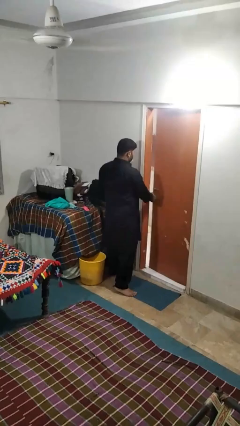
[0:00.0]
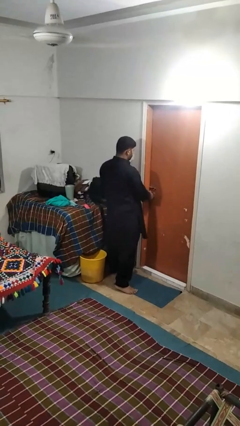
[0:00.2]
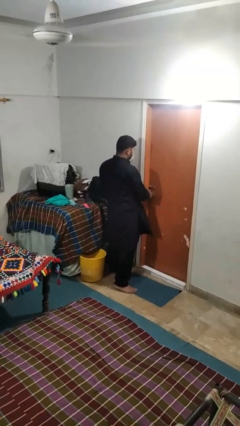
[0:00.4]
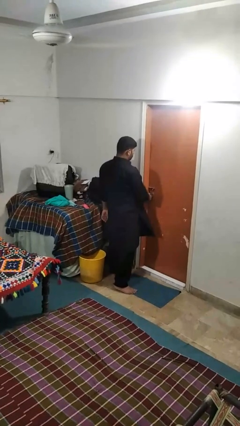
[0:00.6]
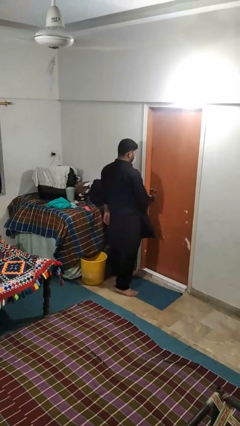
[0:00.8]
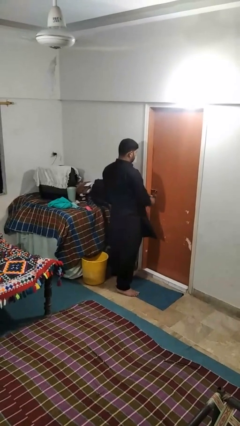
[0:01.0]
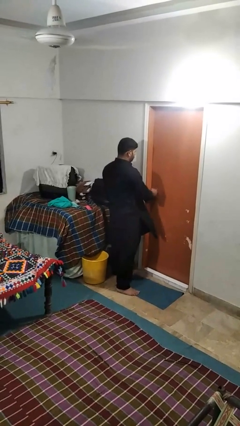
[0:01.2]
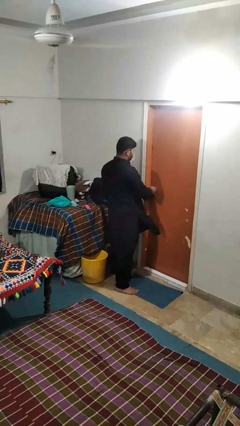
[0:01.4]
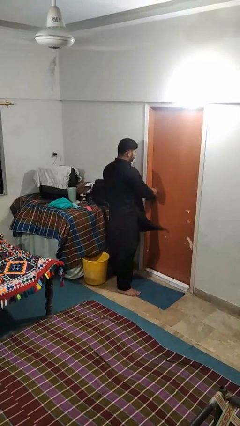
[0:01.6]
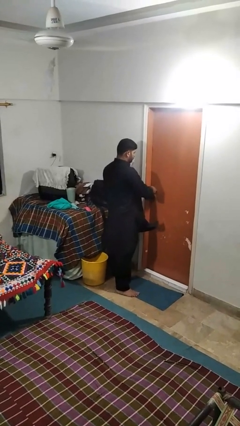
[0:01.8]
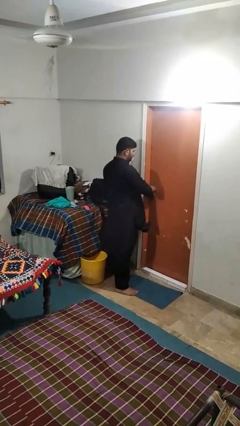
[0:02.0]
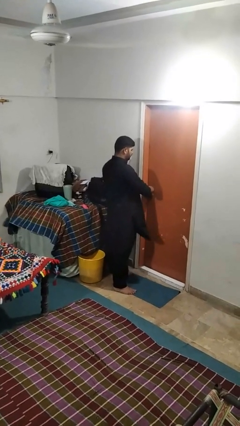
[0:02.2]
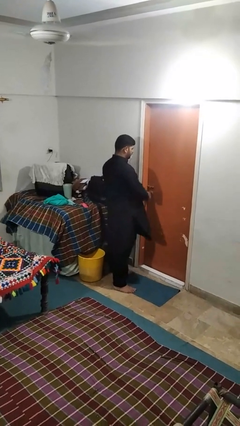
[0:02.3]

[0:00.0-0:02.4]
person locks door with keys

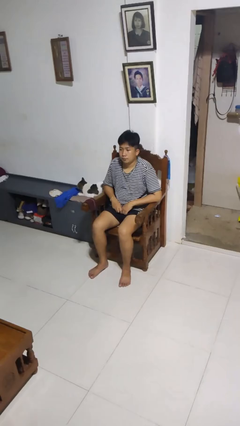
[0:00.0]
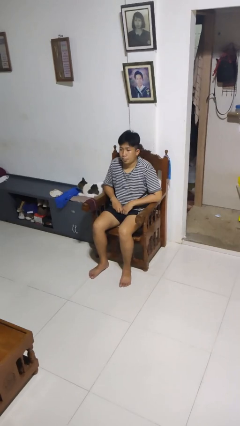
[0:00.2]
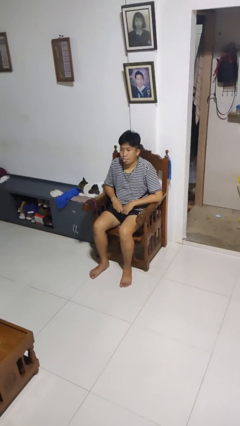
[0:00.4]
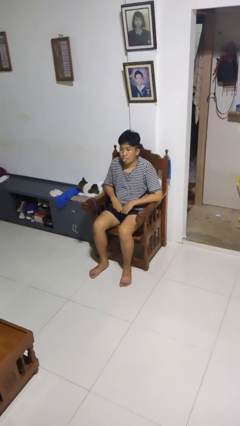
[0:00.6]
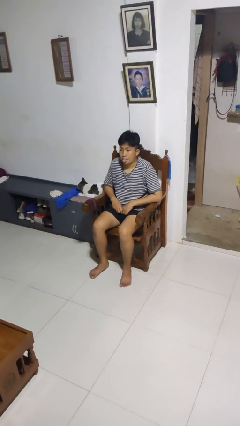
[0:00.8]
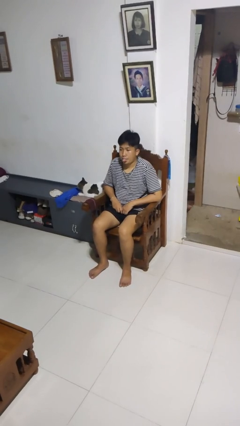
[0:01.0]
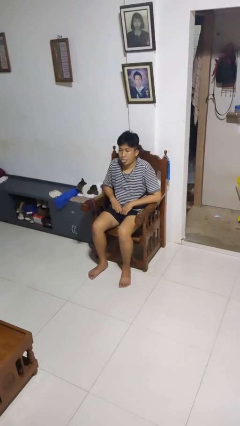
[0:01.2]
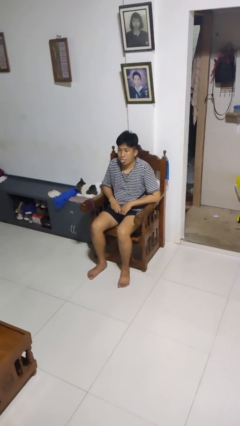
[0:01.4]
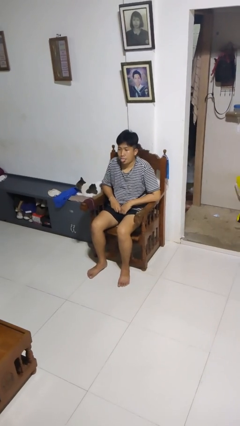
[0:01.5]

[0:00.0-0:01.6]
person sticks out tongue

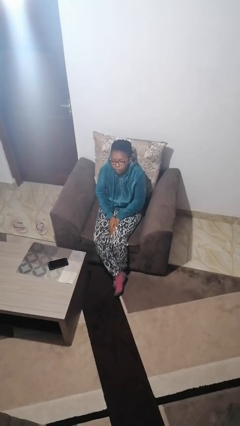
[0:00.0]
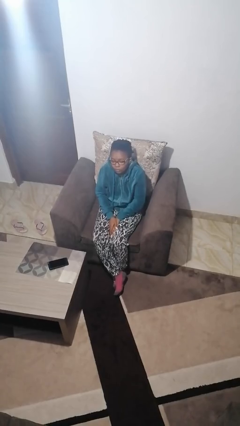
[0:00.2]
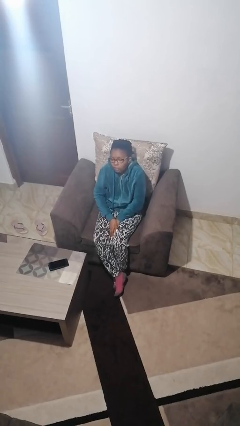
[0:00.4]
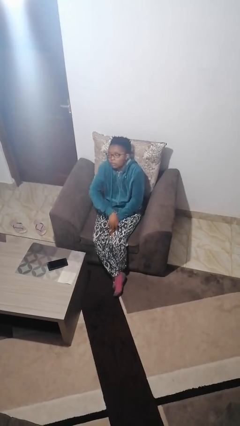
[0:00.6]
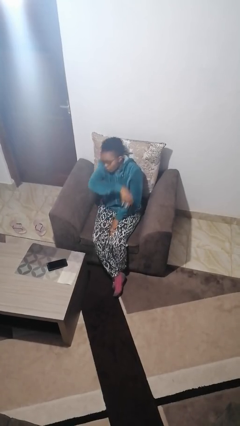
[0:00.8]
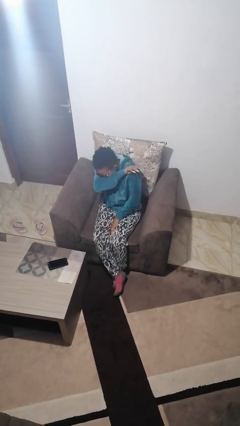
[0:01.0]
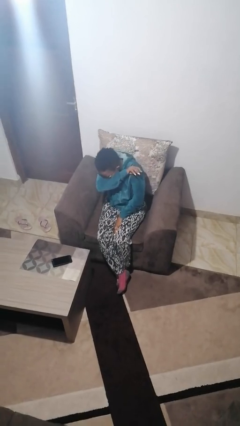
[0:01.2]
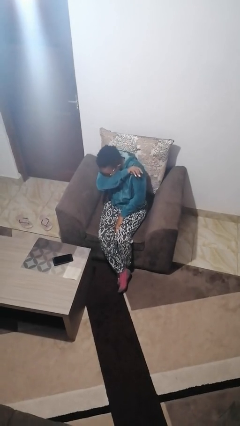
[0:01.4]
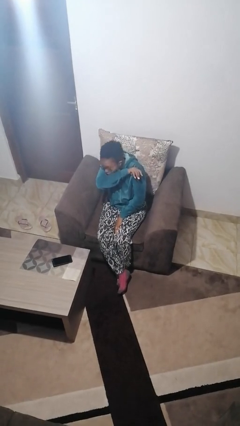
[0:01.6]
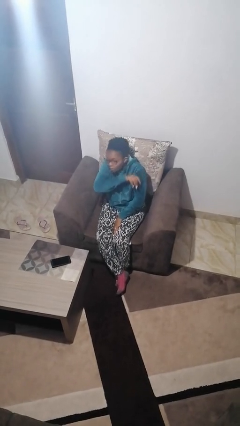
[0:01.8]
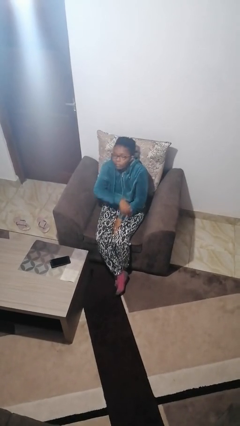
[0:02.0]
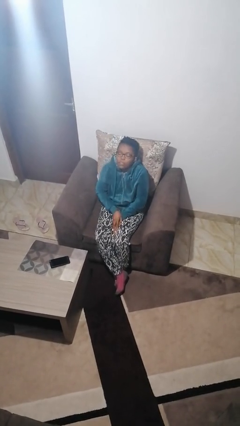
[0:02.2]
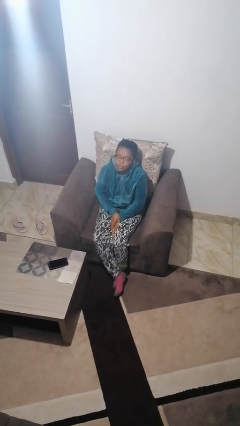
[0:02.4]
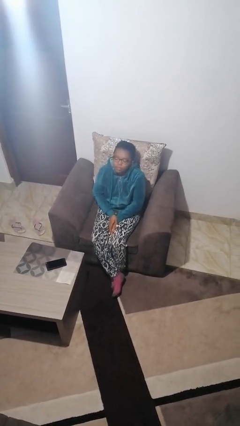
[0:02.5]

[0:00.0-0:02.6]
person sneezes into arm

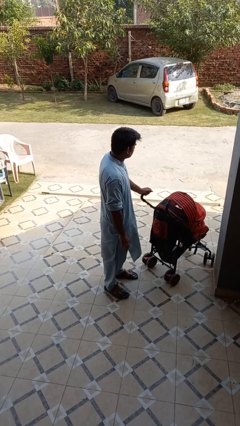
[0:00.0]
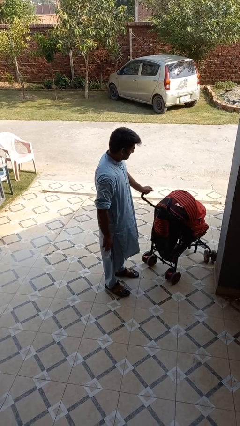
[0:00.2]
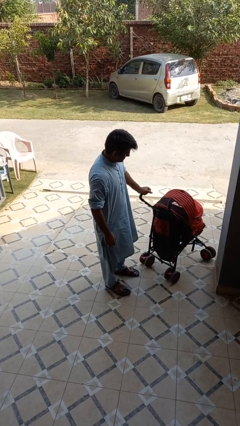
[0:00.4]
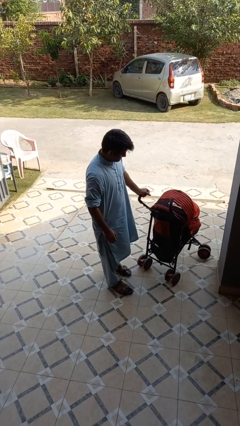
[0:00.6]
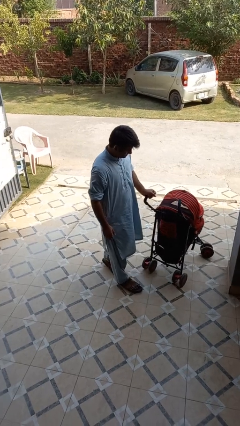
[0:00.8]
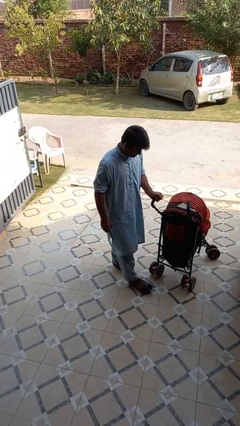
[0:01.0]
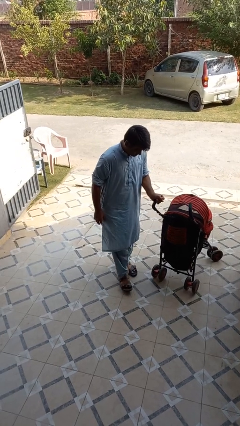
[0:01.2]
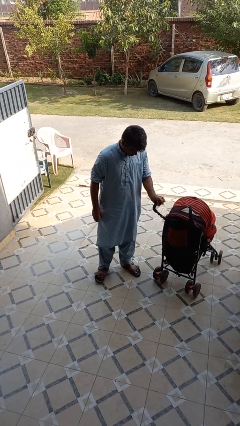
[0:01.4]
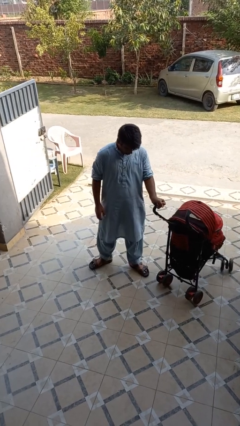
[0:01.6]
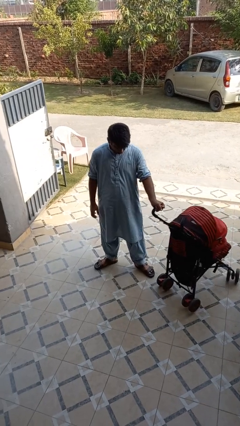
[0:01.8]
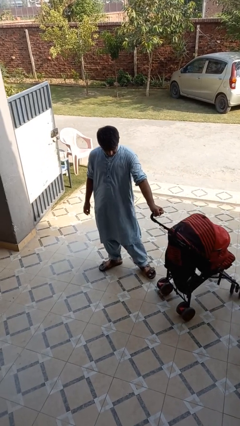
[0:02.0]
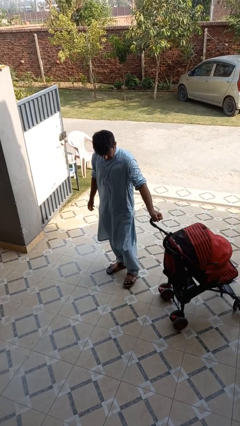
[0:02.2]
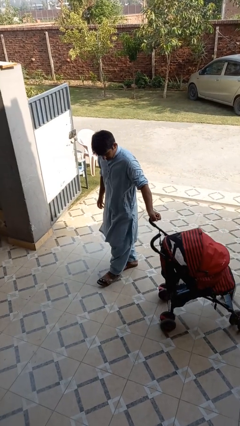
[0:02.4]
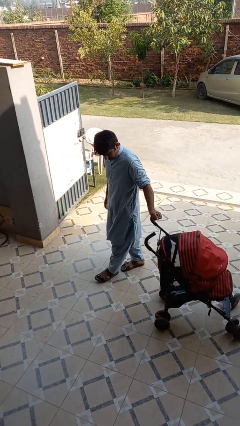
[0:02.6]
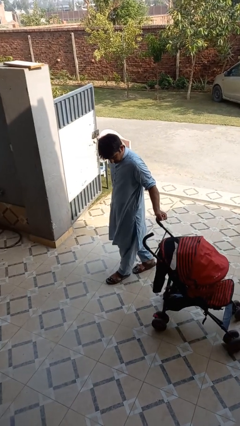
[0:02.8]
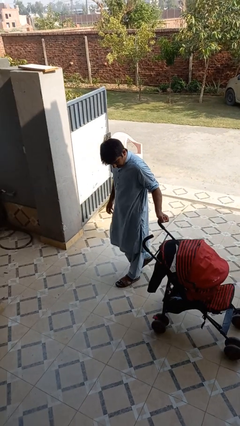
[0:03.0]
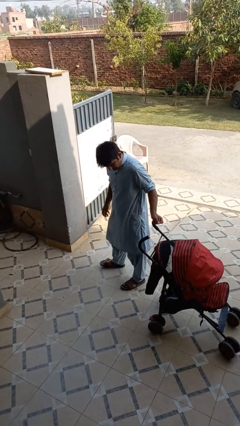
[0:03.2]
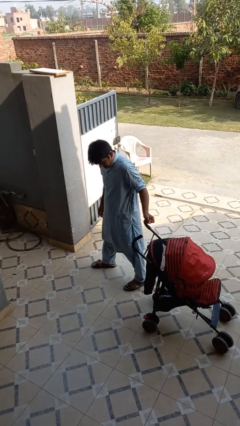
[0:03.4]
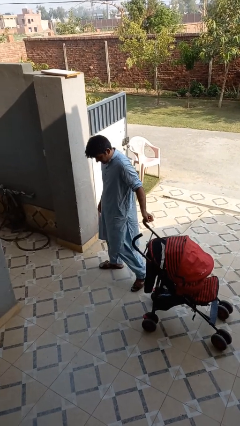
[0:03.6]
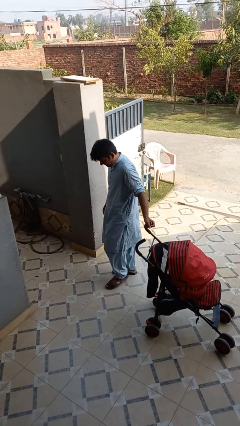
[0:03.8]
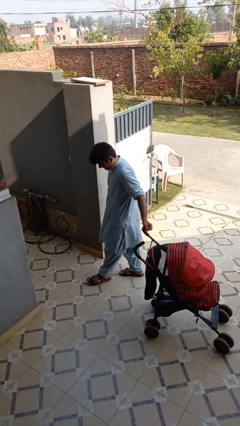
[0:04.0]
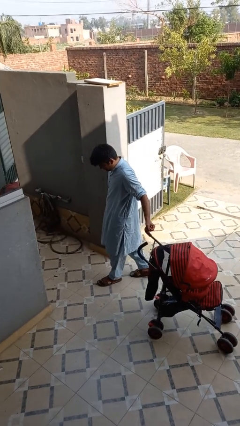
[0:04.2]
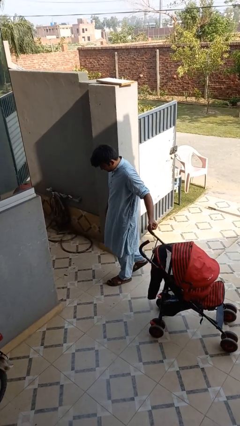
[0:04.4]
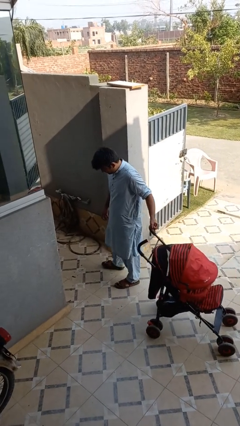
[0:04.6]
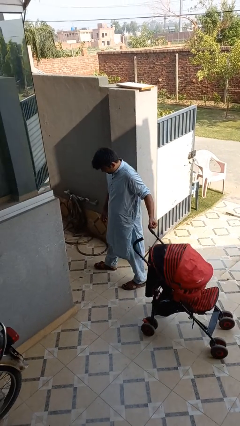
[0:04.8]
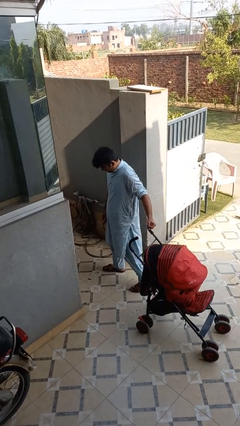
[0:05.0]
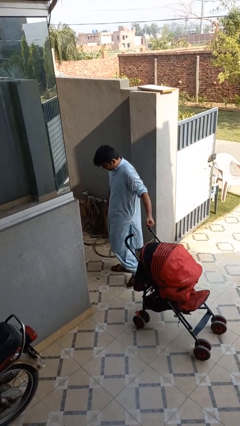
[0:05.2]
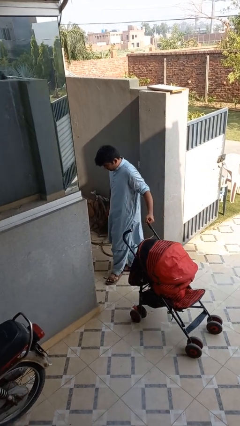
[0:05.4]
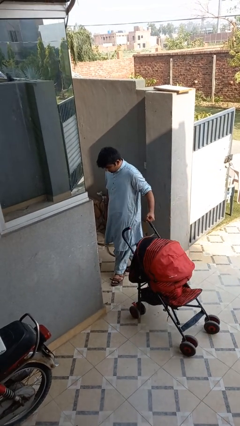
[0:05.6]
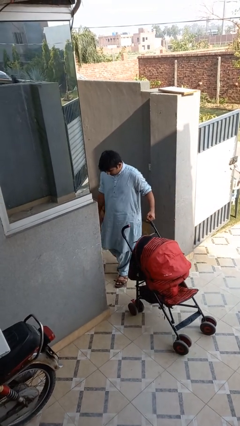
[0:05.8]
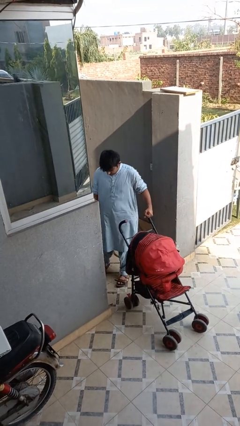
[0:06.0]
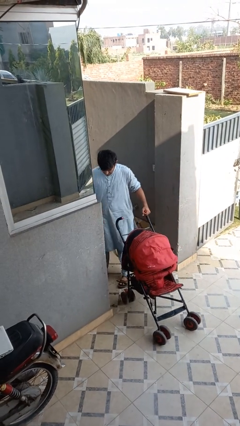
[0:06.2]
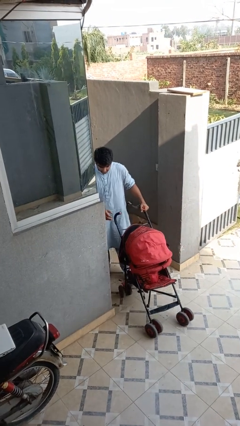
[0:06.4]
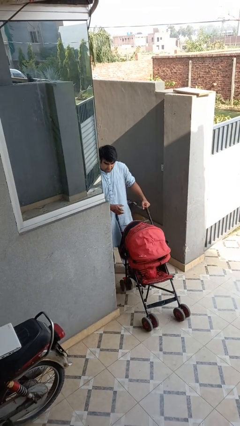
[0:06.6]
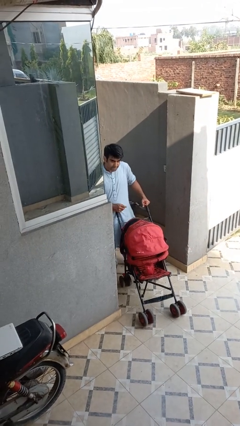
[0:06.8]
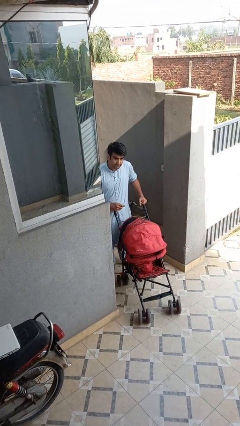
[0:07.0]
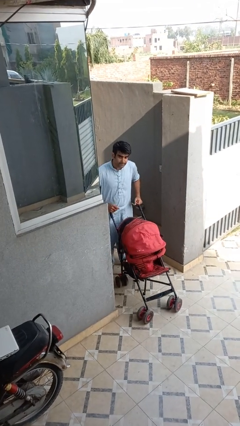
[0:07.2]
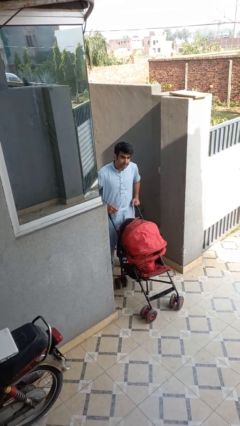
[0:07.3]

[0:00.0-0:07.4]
person pulls wheeled cart

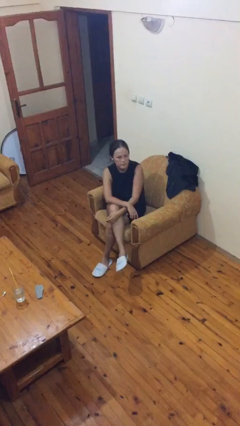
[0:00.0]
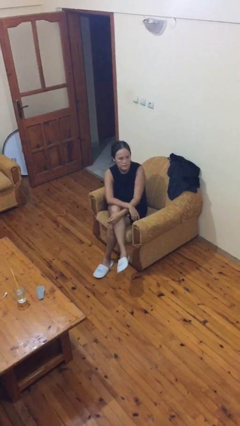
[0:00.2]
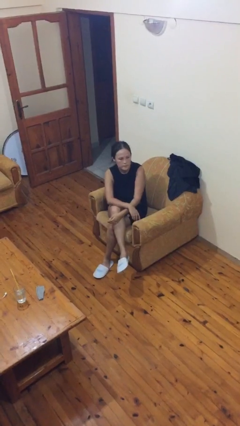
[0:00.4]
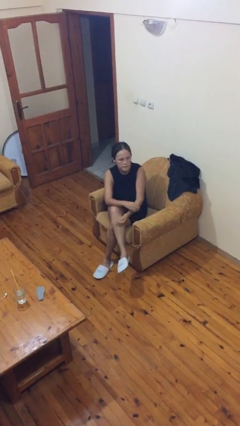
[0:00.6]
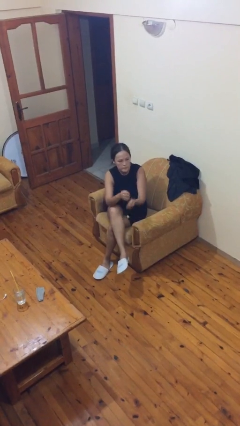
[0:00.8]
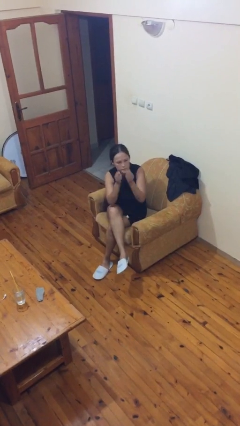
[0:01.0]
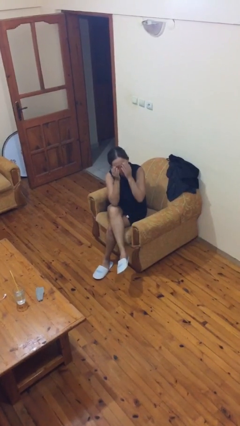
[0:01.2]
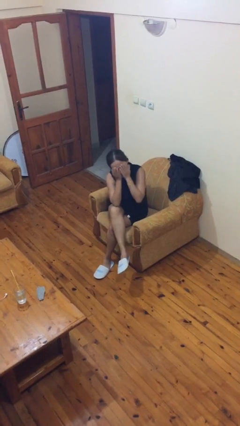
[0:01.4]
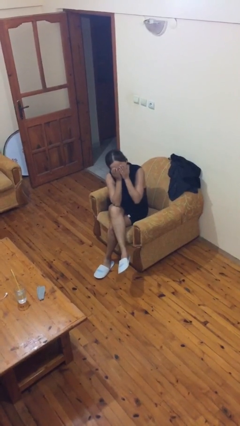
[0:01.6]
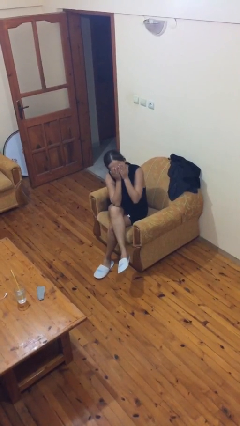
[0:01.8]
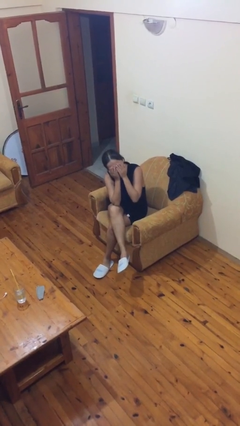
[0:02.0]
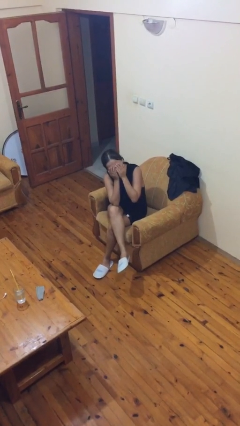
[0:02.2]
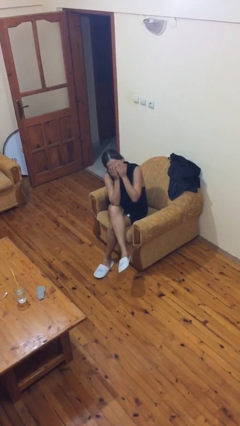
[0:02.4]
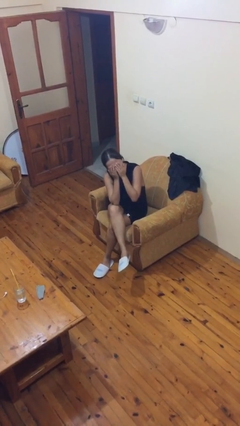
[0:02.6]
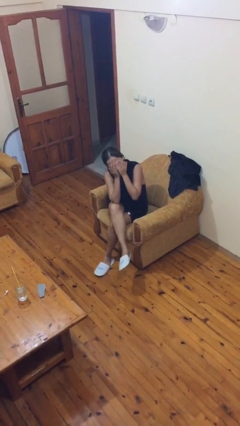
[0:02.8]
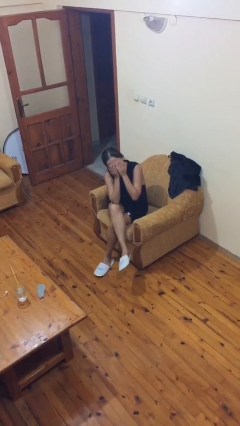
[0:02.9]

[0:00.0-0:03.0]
person covers face with hands

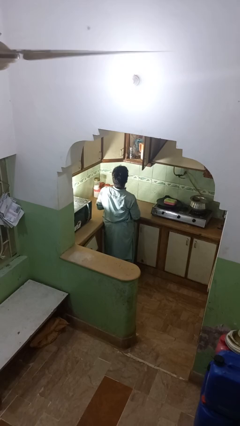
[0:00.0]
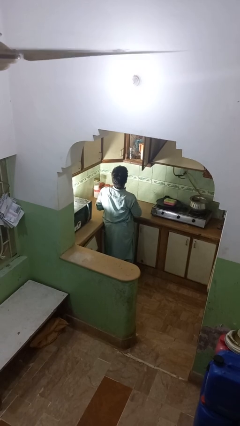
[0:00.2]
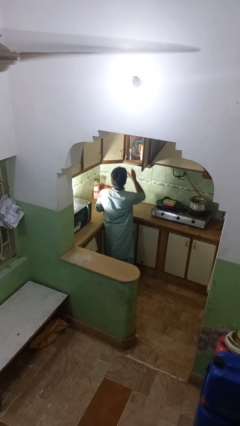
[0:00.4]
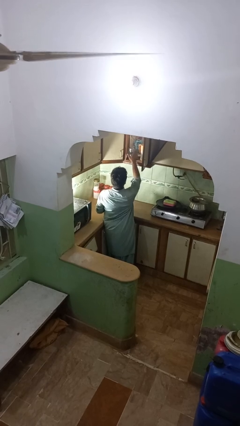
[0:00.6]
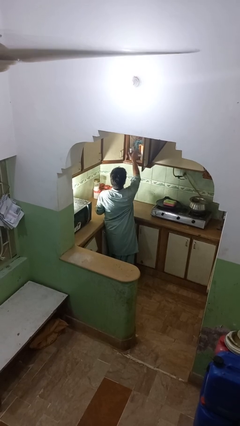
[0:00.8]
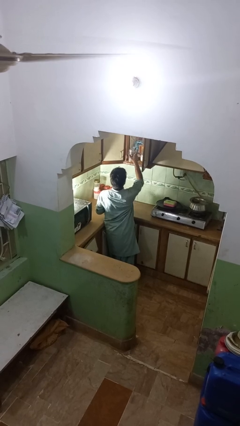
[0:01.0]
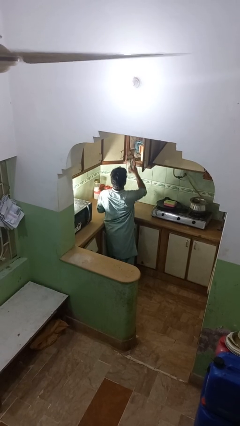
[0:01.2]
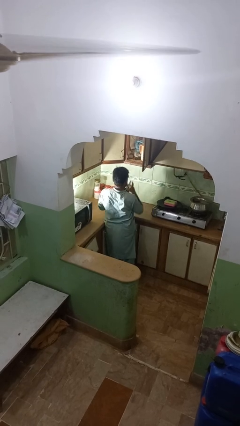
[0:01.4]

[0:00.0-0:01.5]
person takes object from kitchen drawer
